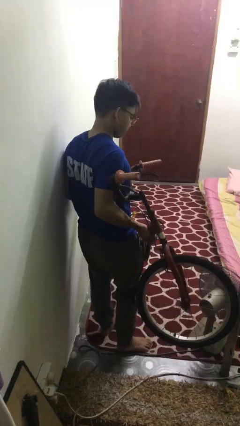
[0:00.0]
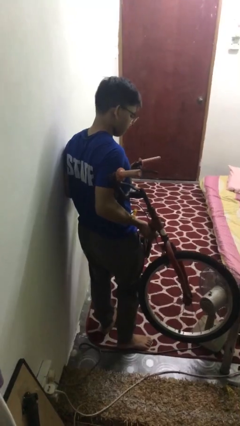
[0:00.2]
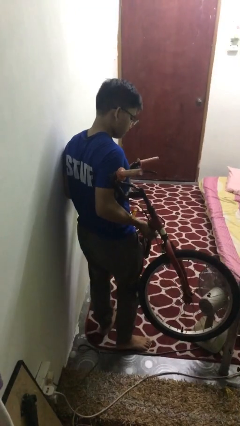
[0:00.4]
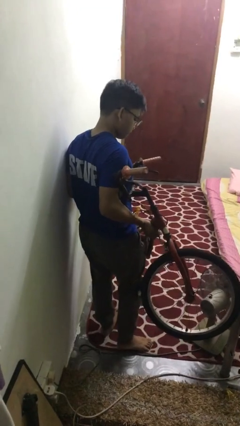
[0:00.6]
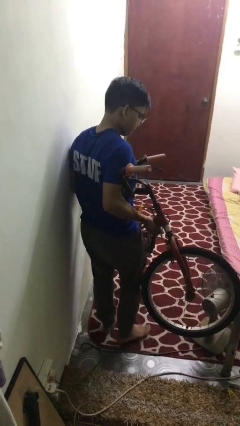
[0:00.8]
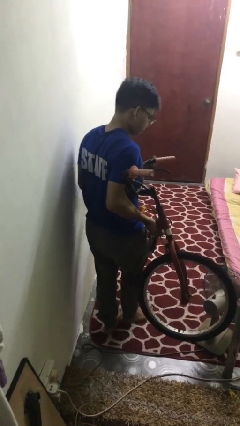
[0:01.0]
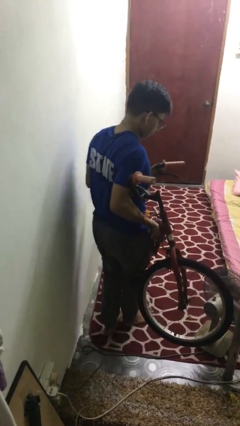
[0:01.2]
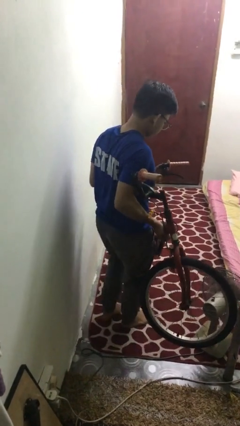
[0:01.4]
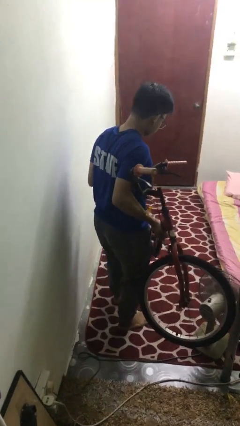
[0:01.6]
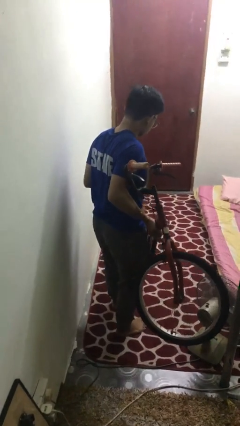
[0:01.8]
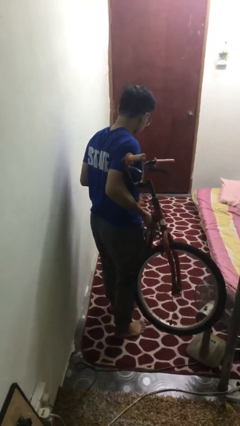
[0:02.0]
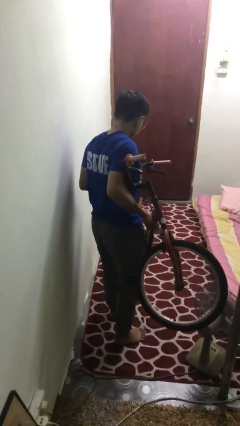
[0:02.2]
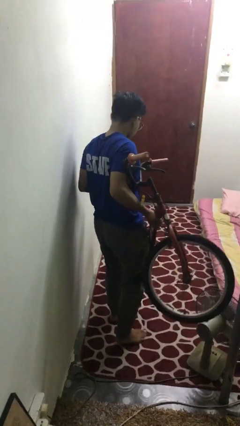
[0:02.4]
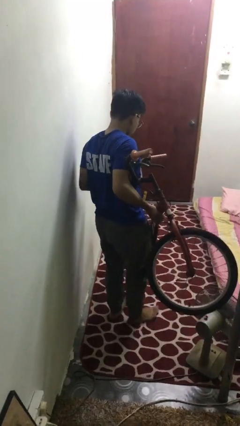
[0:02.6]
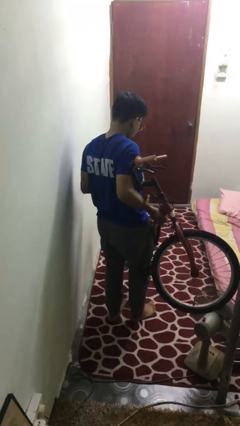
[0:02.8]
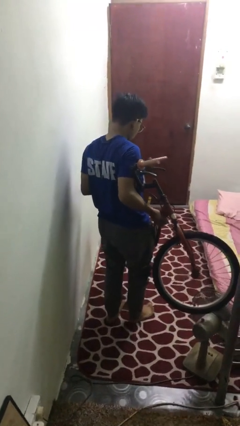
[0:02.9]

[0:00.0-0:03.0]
person carries bicycle

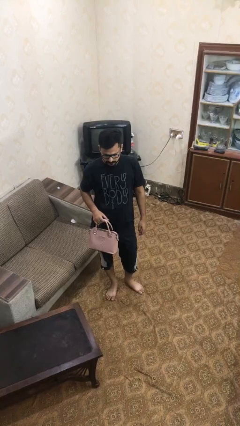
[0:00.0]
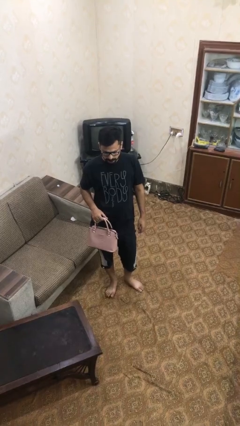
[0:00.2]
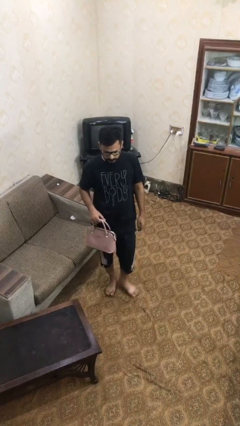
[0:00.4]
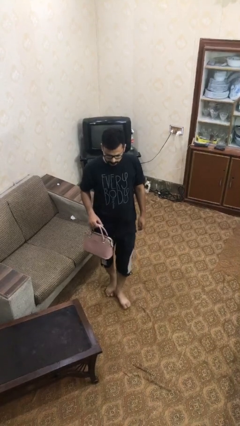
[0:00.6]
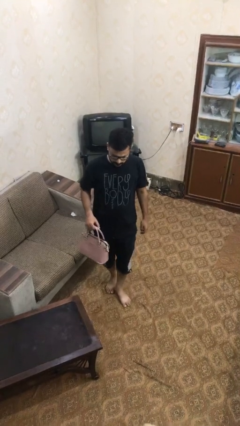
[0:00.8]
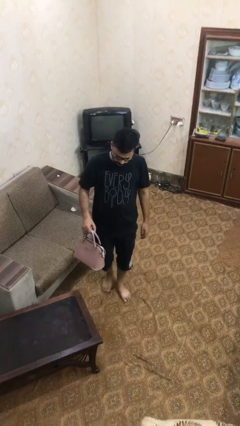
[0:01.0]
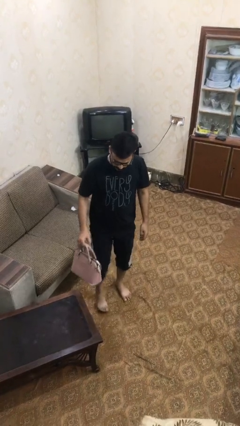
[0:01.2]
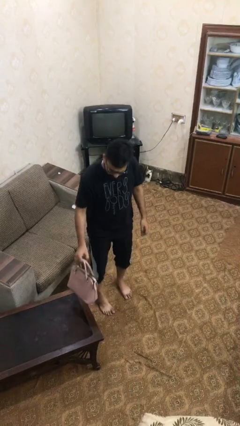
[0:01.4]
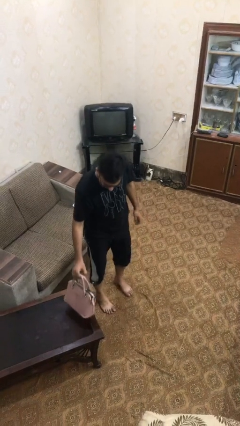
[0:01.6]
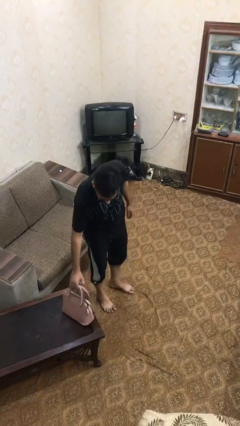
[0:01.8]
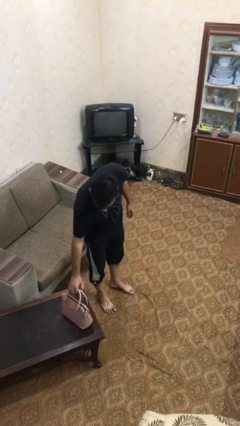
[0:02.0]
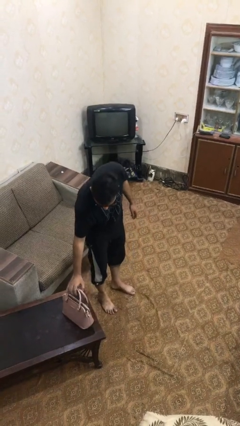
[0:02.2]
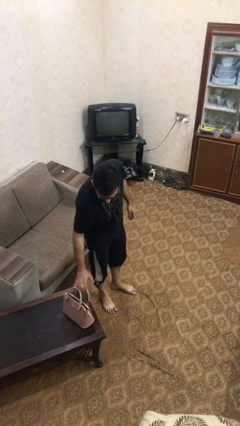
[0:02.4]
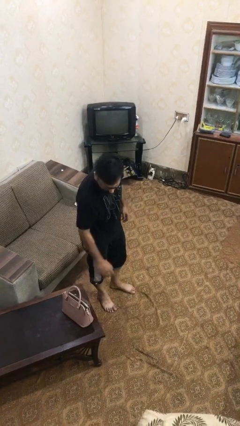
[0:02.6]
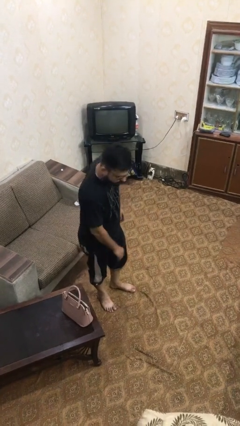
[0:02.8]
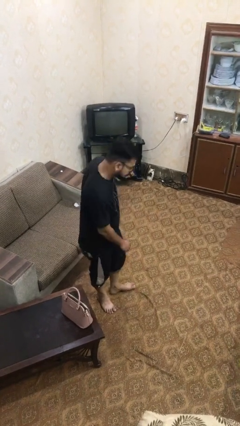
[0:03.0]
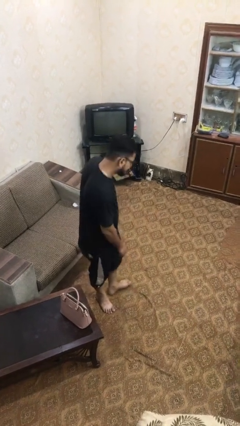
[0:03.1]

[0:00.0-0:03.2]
person puts down object on table

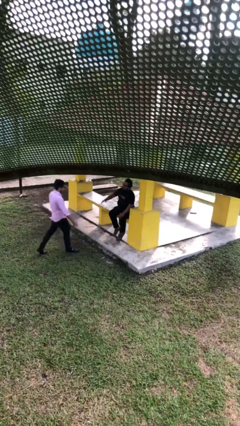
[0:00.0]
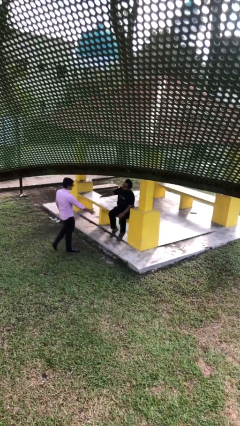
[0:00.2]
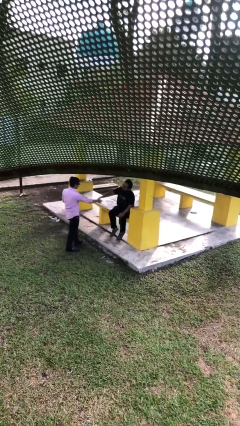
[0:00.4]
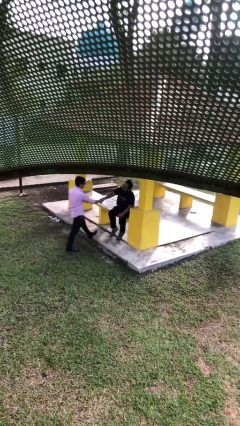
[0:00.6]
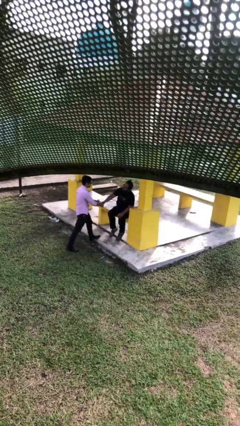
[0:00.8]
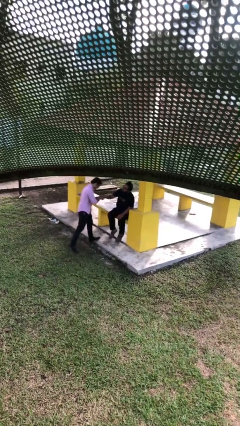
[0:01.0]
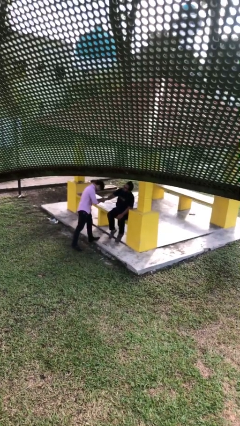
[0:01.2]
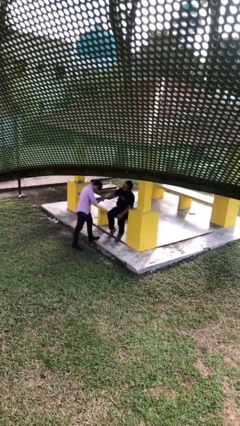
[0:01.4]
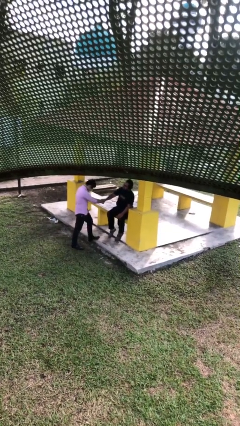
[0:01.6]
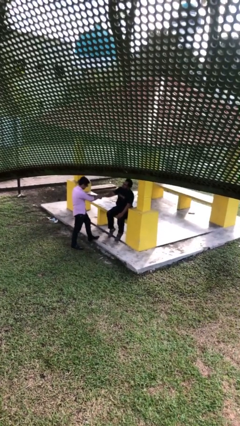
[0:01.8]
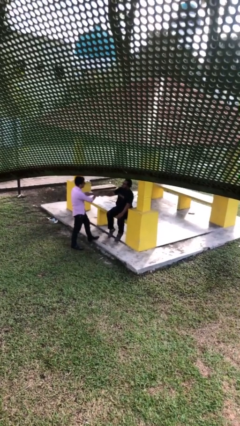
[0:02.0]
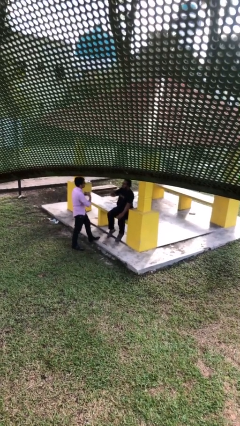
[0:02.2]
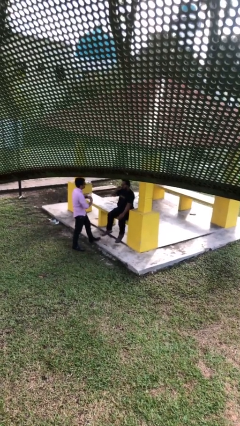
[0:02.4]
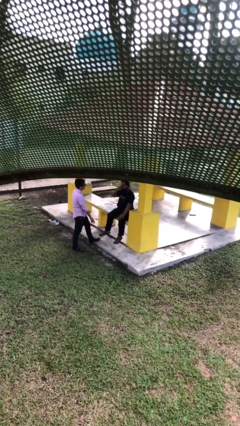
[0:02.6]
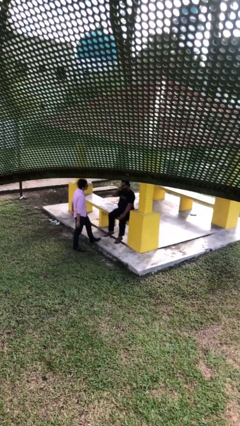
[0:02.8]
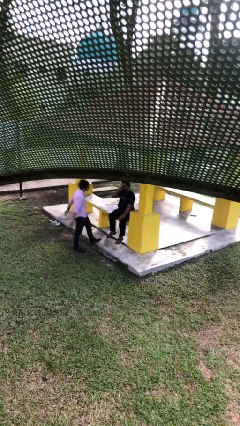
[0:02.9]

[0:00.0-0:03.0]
person shakes hand

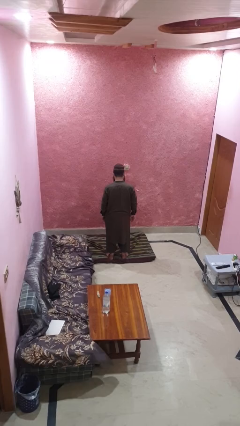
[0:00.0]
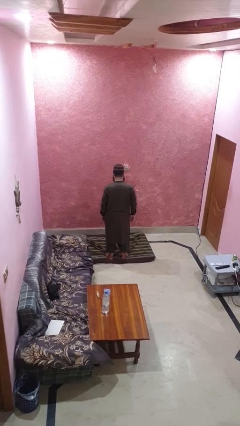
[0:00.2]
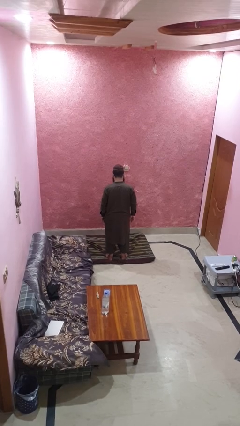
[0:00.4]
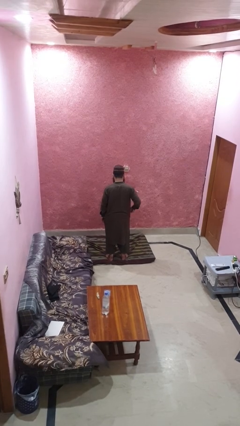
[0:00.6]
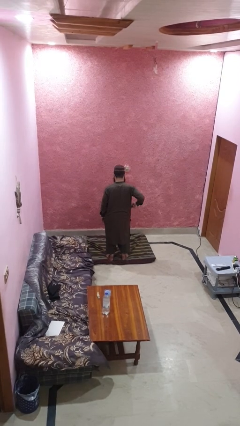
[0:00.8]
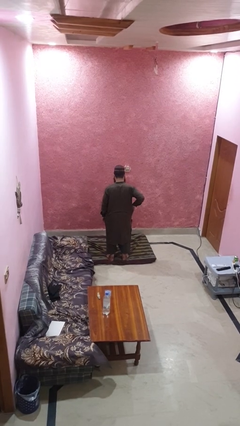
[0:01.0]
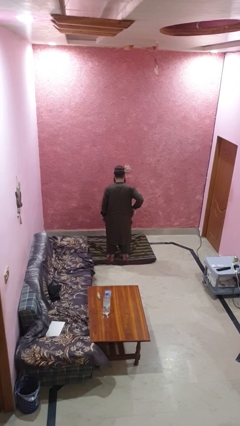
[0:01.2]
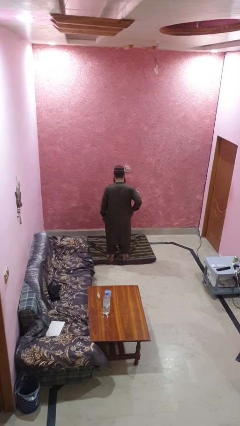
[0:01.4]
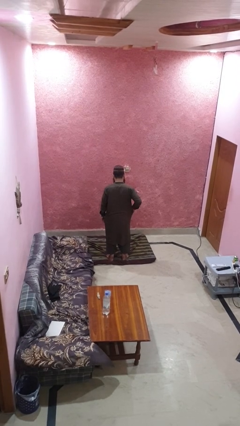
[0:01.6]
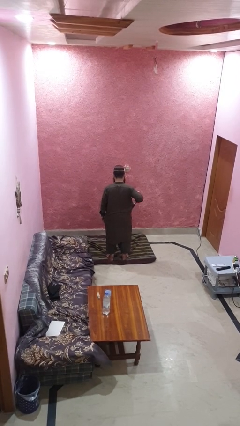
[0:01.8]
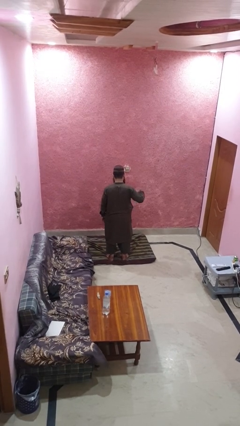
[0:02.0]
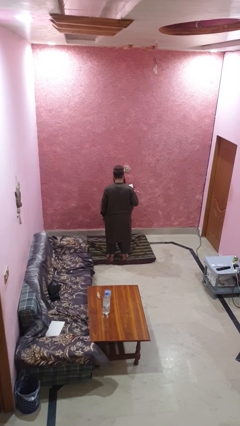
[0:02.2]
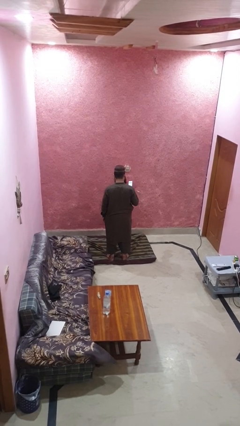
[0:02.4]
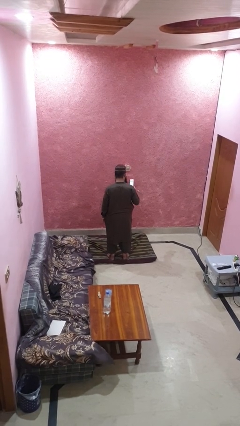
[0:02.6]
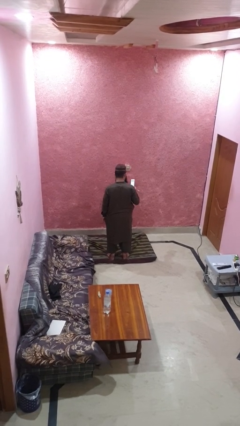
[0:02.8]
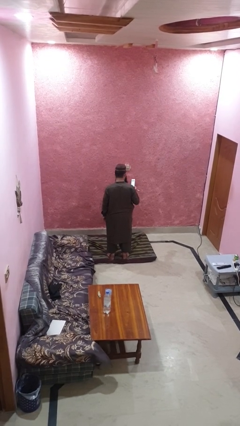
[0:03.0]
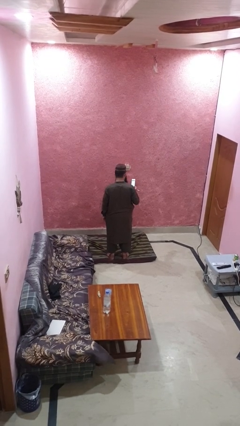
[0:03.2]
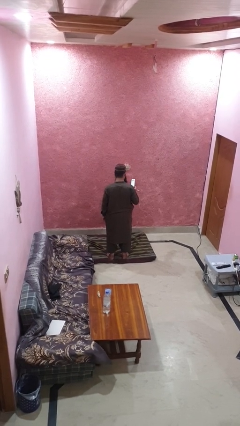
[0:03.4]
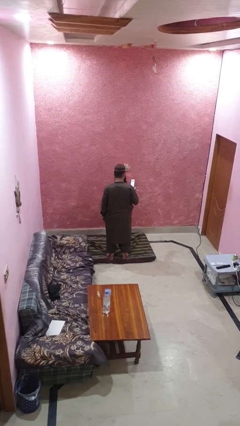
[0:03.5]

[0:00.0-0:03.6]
person takes phone from pocket

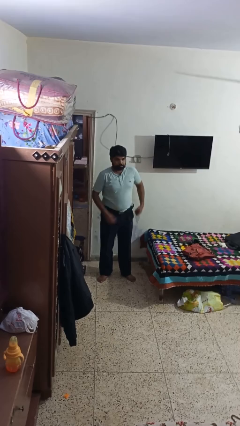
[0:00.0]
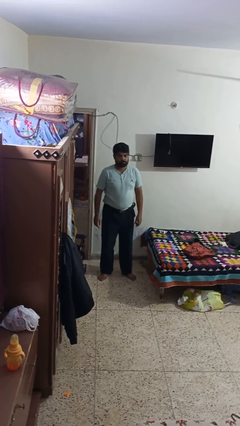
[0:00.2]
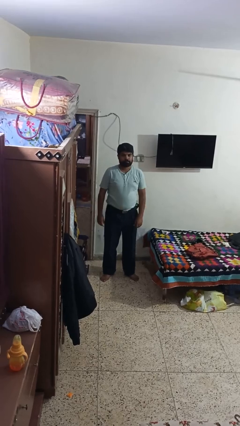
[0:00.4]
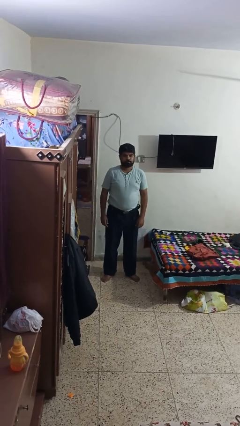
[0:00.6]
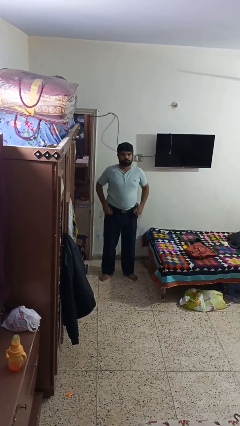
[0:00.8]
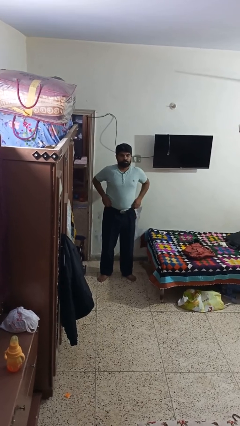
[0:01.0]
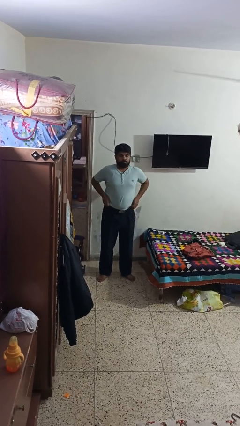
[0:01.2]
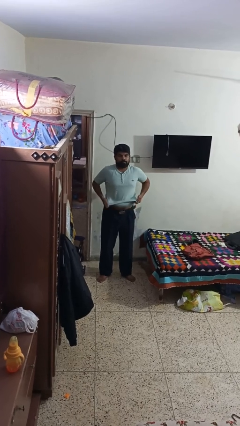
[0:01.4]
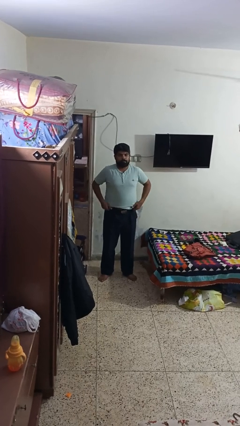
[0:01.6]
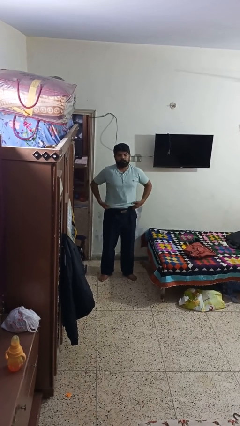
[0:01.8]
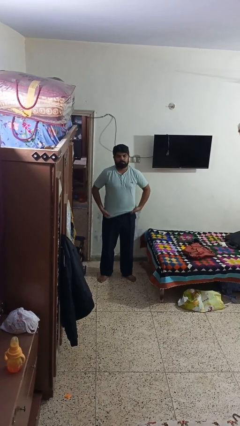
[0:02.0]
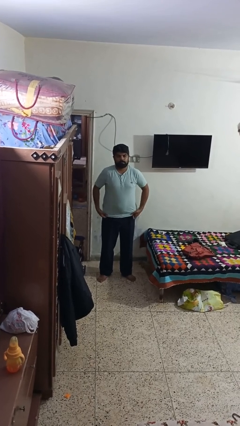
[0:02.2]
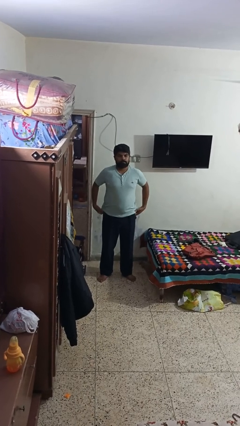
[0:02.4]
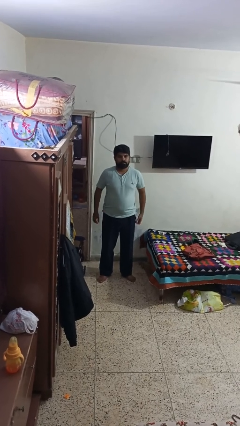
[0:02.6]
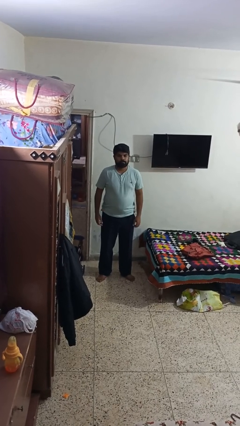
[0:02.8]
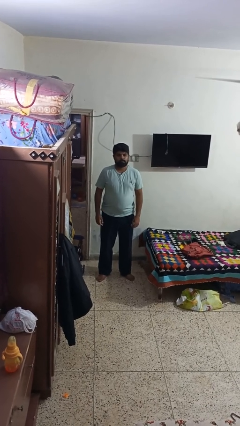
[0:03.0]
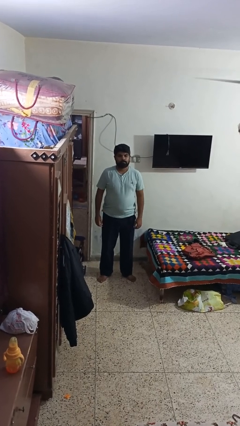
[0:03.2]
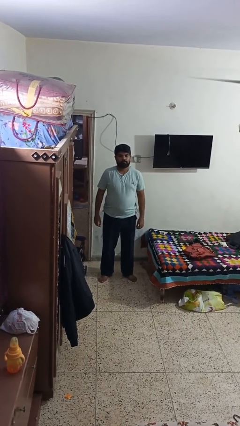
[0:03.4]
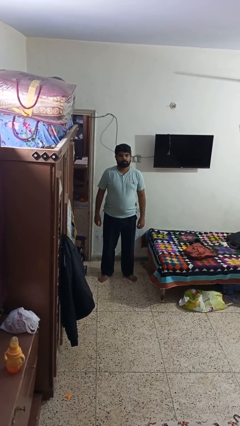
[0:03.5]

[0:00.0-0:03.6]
person untucks shirt

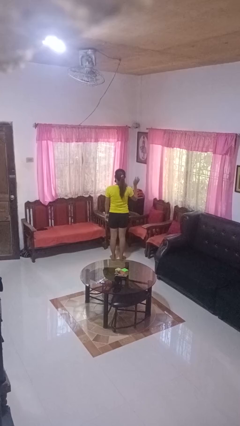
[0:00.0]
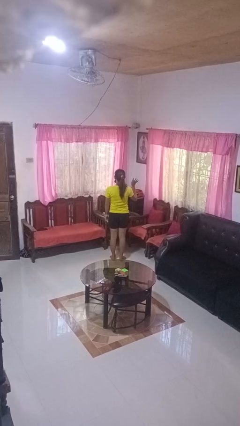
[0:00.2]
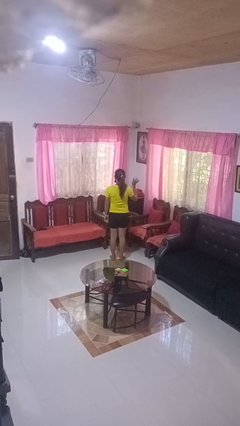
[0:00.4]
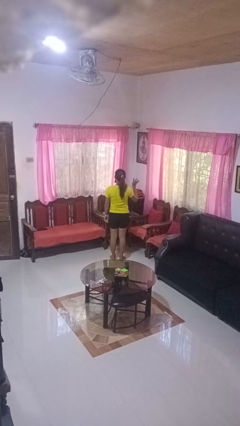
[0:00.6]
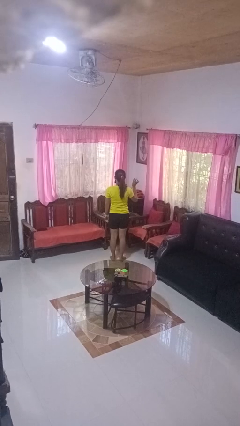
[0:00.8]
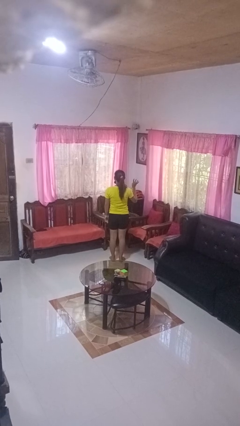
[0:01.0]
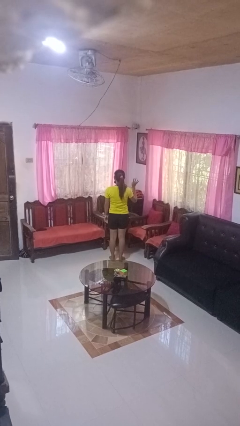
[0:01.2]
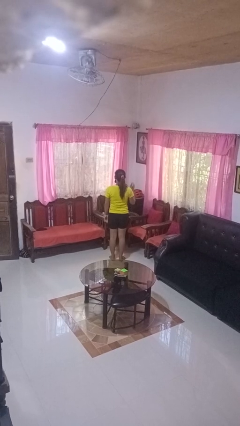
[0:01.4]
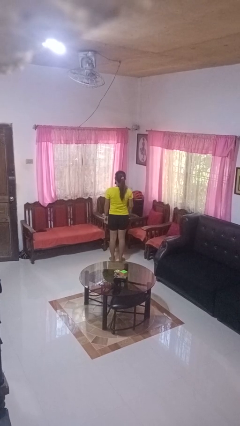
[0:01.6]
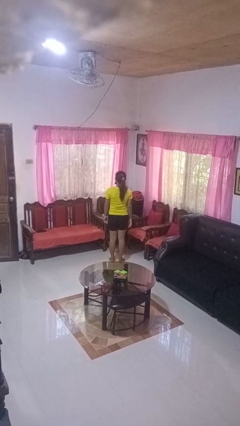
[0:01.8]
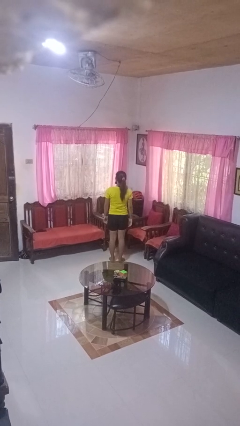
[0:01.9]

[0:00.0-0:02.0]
person gestures number four
